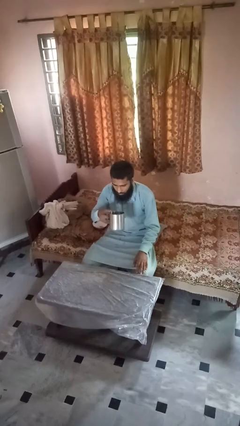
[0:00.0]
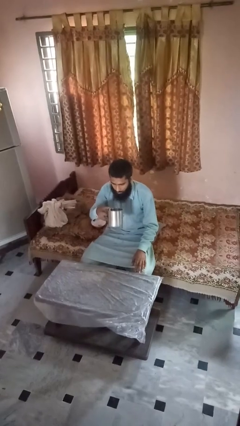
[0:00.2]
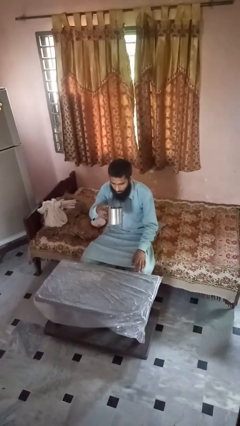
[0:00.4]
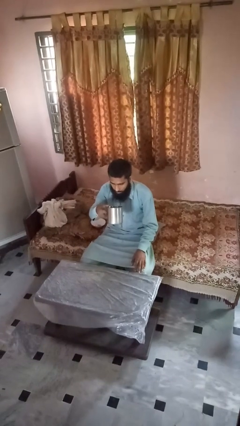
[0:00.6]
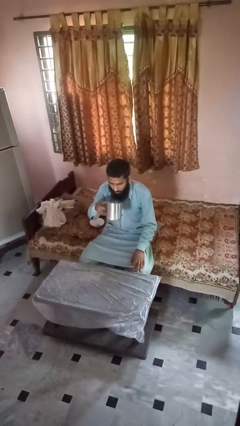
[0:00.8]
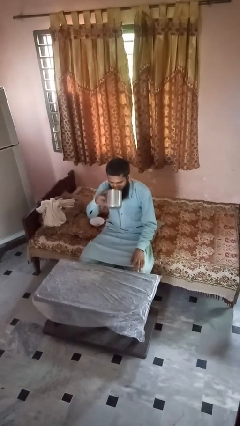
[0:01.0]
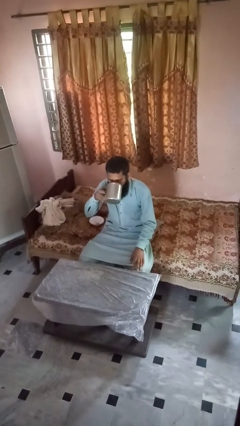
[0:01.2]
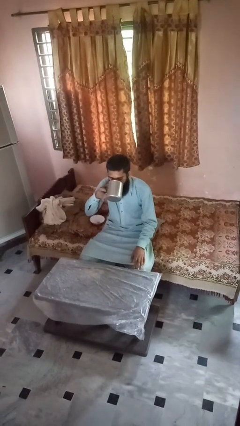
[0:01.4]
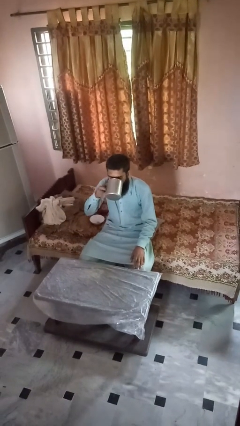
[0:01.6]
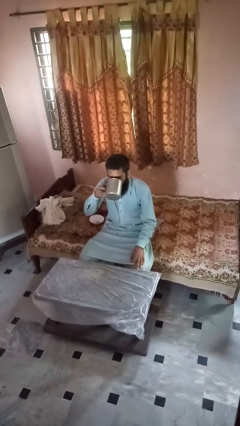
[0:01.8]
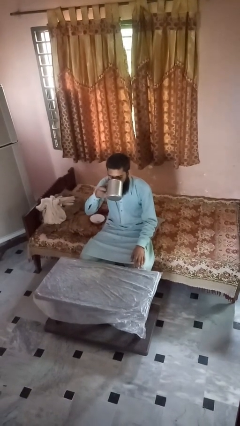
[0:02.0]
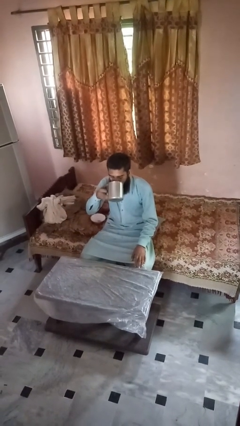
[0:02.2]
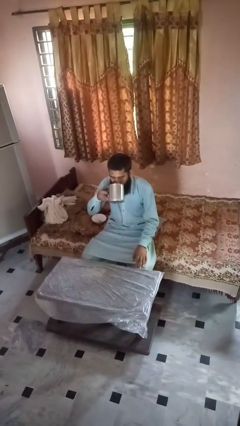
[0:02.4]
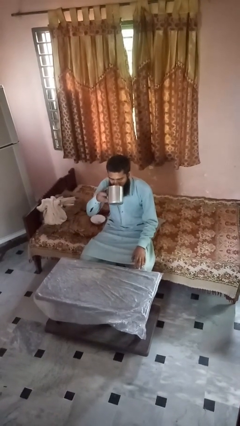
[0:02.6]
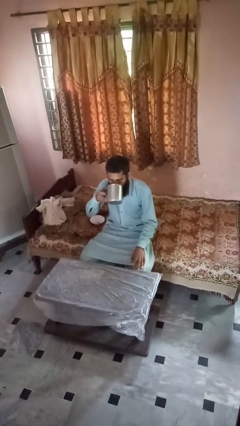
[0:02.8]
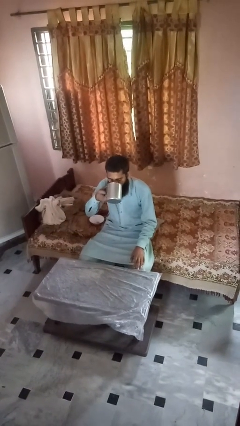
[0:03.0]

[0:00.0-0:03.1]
person drinks from mug

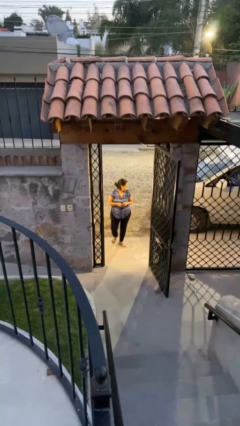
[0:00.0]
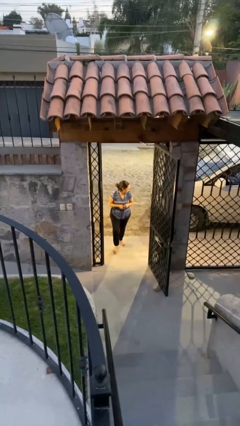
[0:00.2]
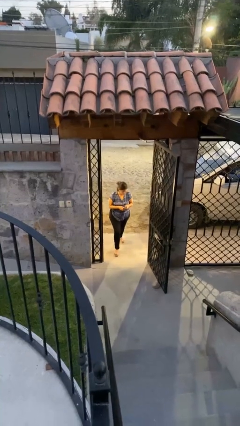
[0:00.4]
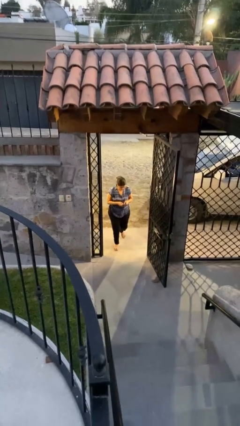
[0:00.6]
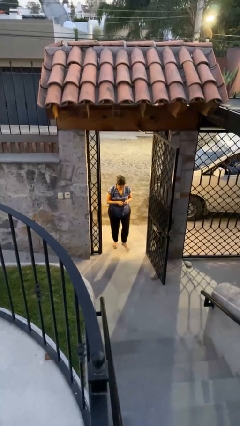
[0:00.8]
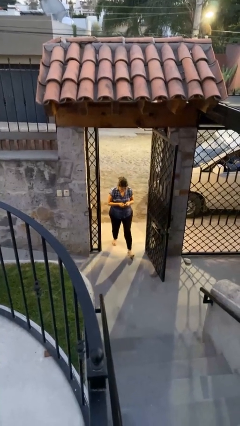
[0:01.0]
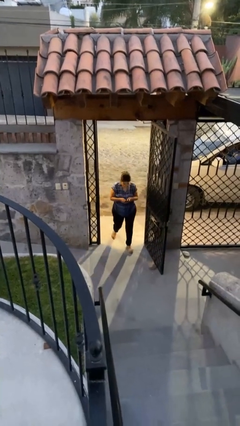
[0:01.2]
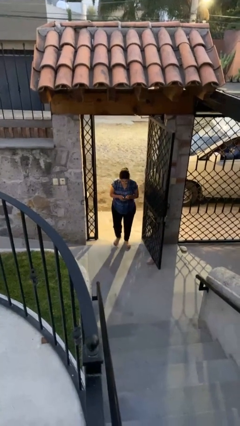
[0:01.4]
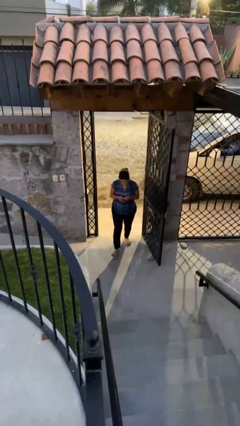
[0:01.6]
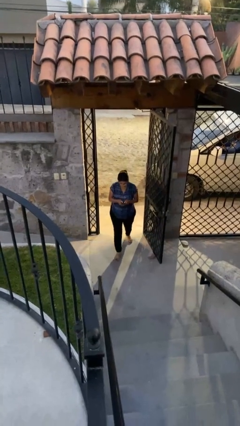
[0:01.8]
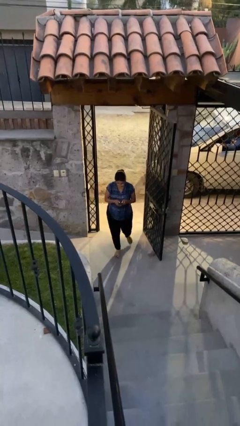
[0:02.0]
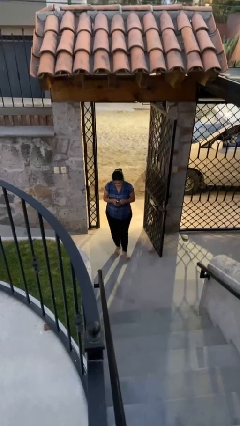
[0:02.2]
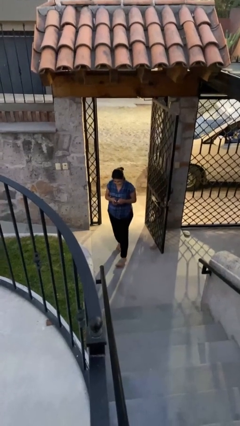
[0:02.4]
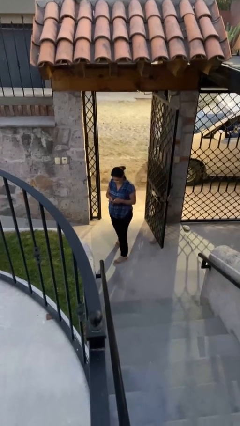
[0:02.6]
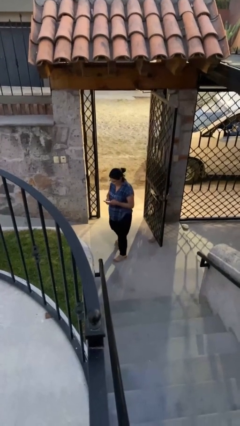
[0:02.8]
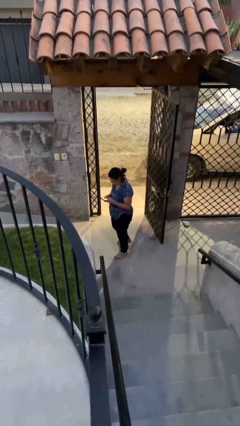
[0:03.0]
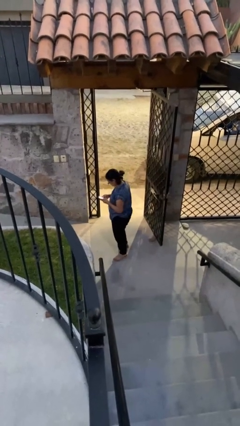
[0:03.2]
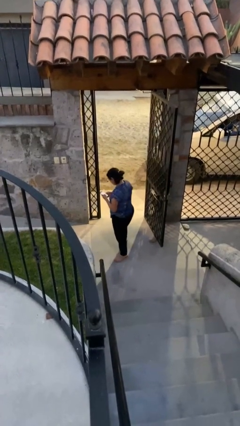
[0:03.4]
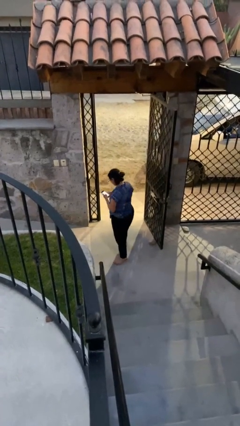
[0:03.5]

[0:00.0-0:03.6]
person enters scene through structure

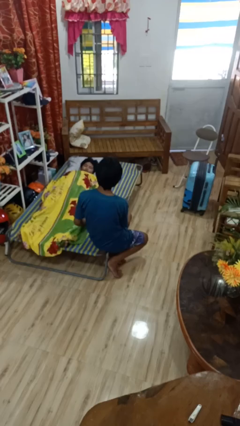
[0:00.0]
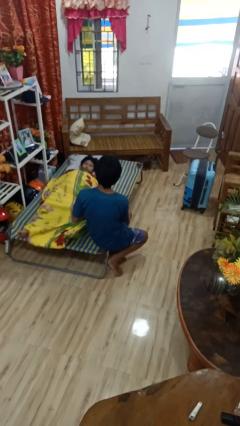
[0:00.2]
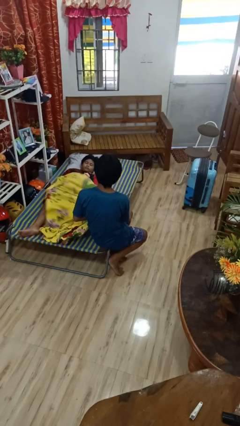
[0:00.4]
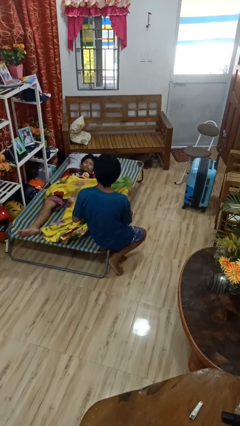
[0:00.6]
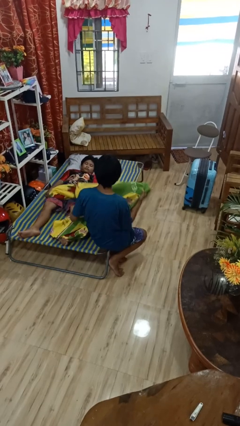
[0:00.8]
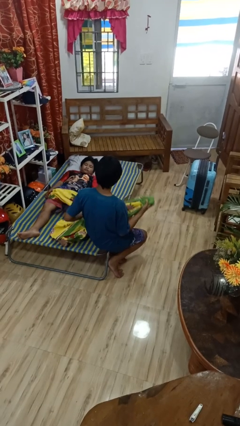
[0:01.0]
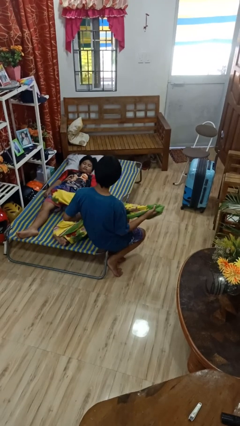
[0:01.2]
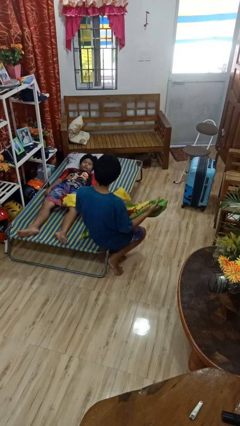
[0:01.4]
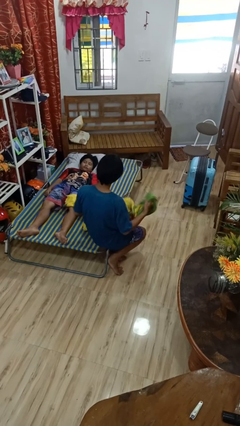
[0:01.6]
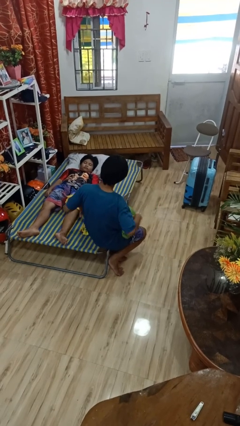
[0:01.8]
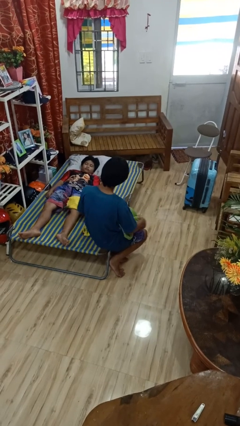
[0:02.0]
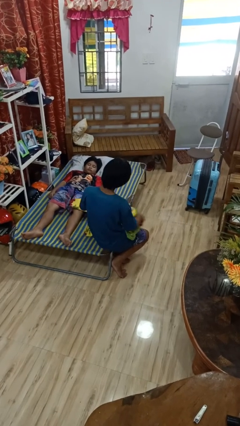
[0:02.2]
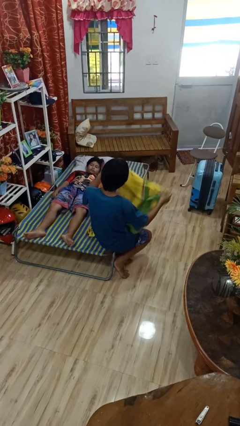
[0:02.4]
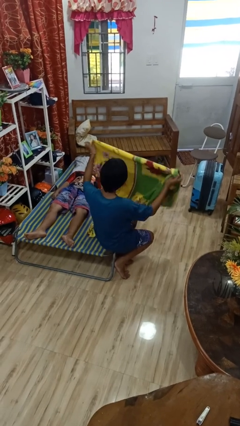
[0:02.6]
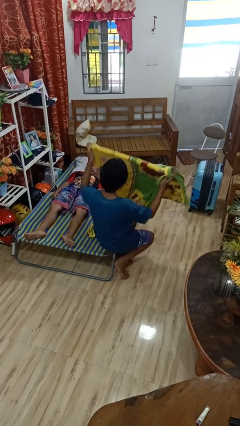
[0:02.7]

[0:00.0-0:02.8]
person uncovers friend with blanket

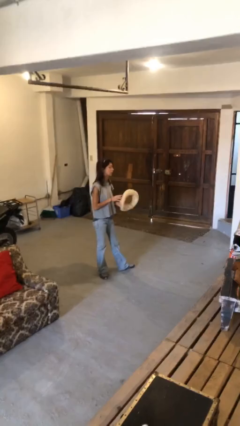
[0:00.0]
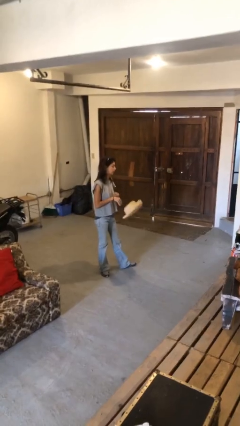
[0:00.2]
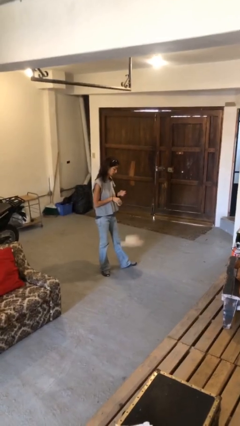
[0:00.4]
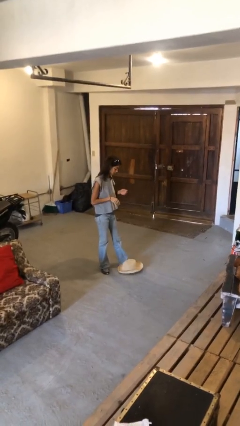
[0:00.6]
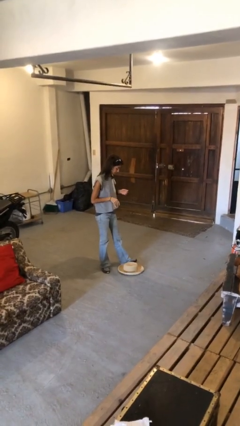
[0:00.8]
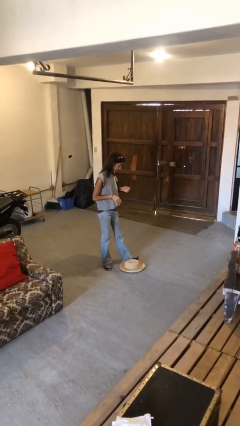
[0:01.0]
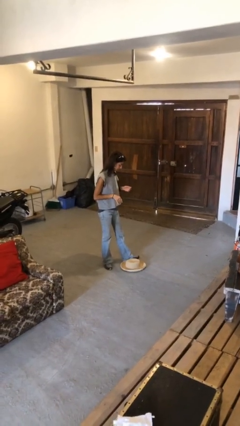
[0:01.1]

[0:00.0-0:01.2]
person drops object

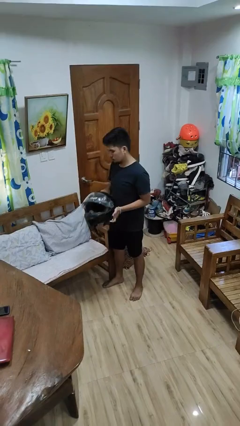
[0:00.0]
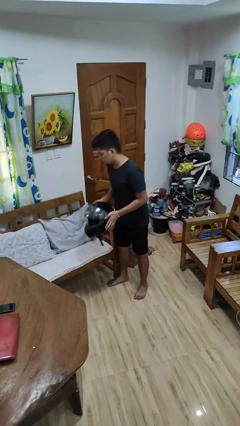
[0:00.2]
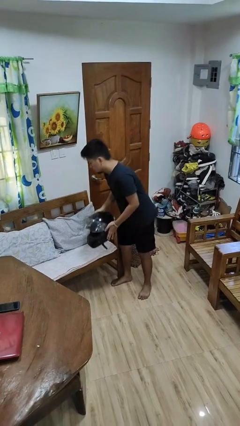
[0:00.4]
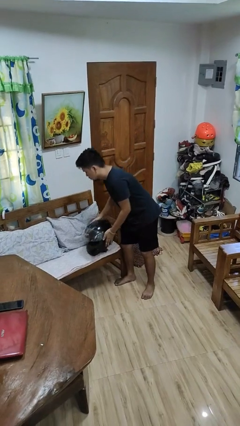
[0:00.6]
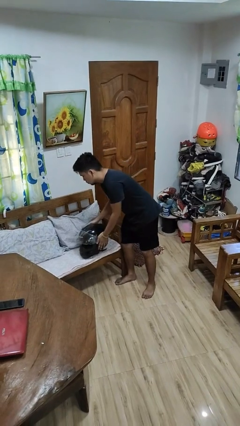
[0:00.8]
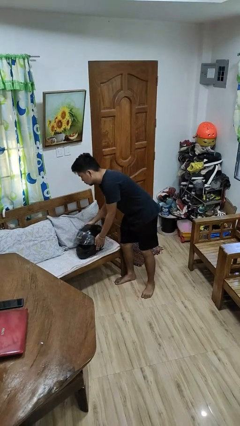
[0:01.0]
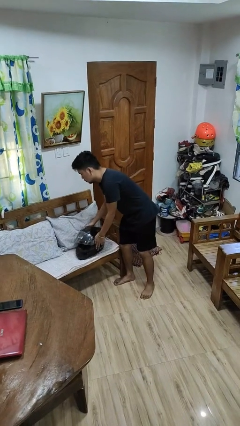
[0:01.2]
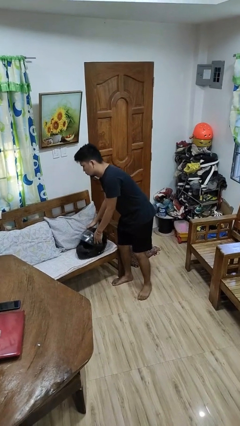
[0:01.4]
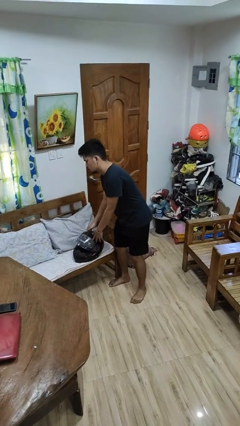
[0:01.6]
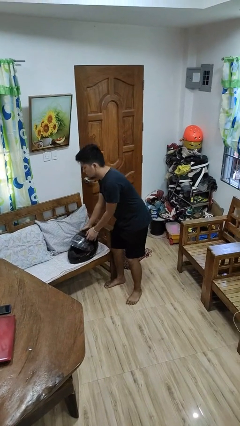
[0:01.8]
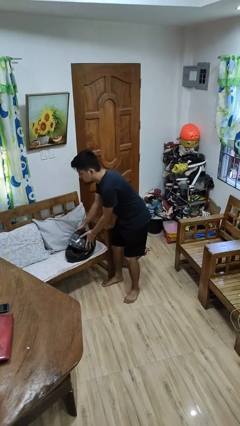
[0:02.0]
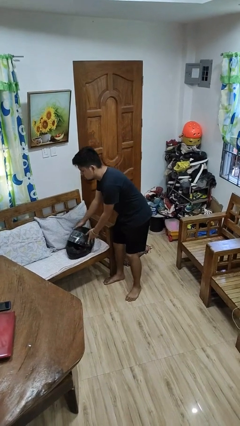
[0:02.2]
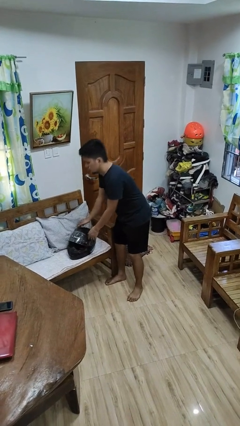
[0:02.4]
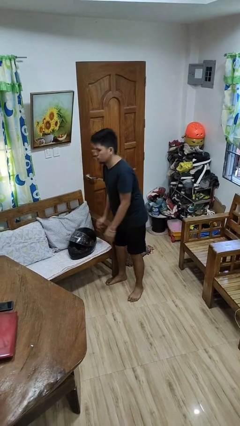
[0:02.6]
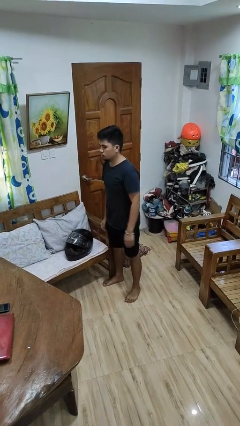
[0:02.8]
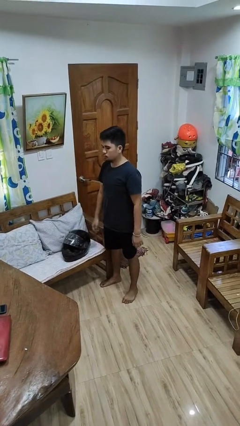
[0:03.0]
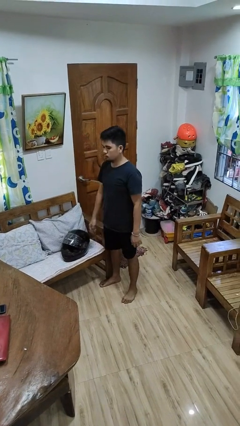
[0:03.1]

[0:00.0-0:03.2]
person puts down object on couch

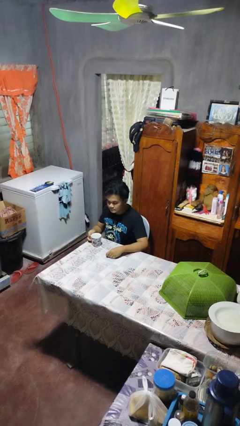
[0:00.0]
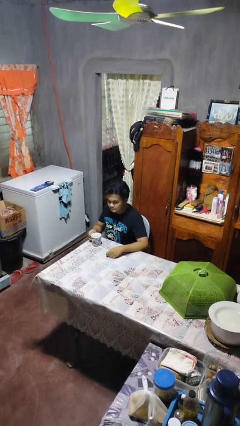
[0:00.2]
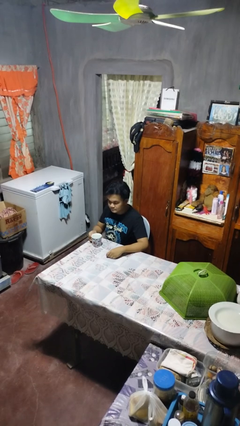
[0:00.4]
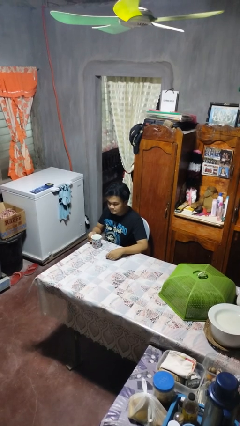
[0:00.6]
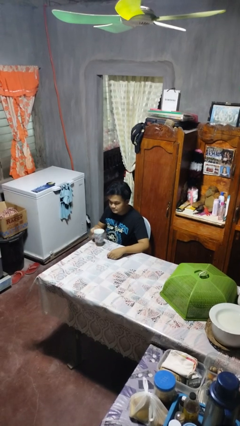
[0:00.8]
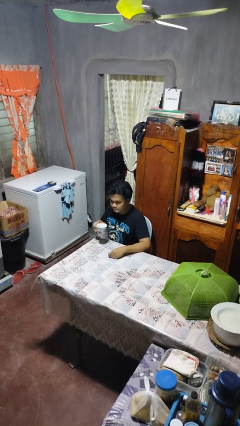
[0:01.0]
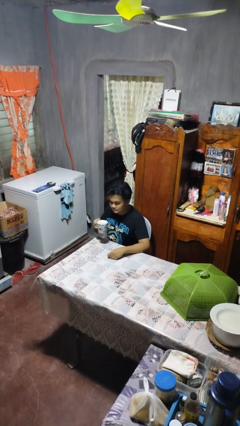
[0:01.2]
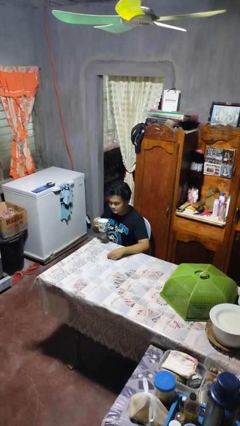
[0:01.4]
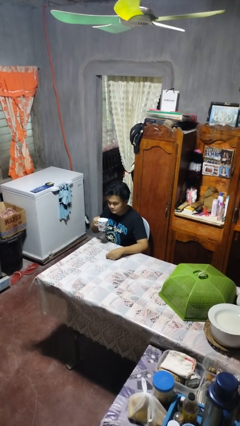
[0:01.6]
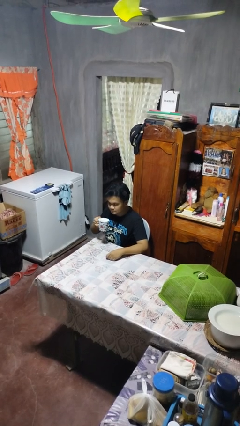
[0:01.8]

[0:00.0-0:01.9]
person picks up object from table

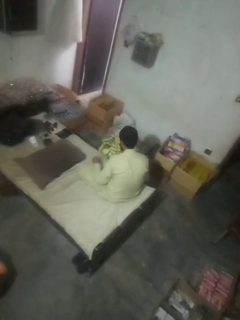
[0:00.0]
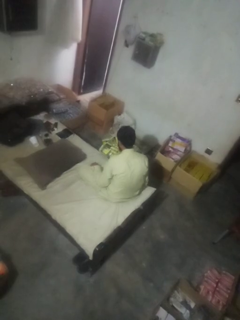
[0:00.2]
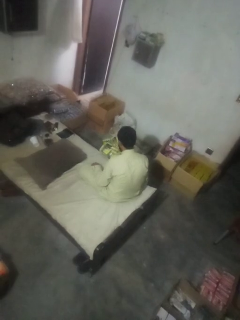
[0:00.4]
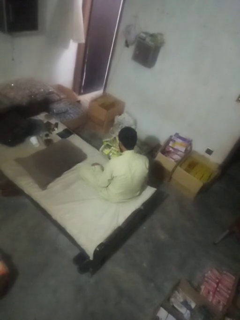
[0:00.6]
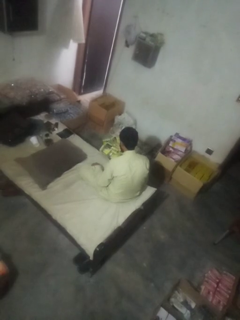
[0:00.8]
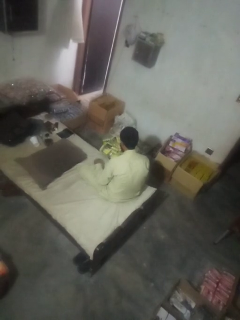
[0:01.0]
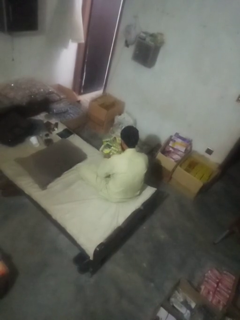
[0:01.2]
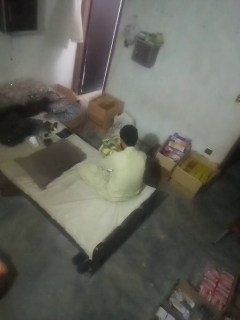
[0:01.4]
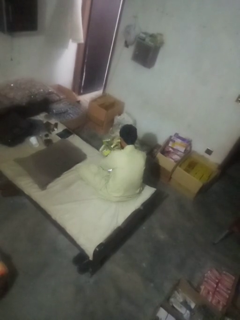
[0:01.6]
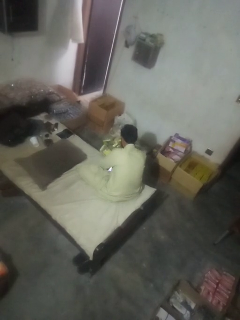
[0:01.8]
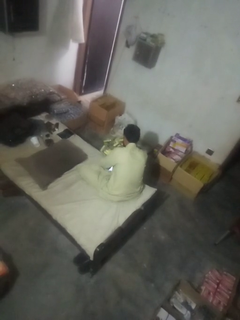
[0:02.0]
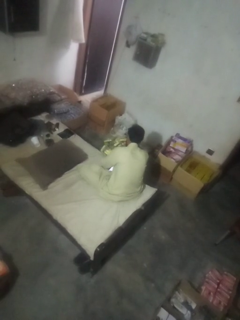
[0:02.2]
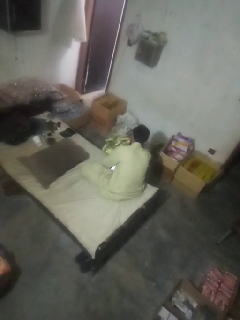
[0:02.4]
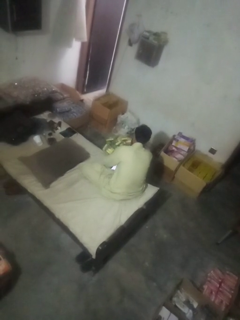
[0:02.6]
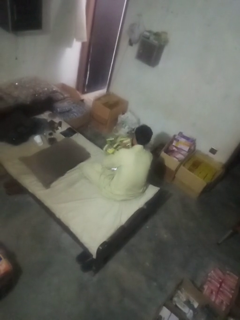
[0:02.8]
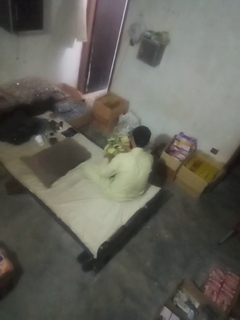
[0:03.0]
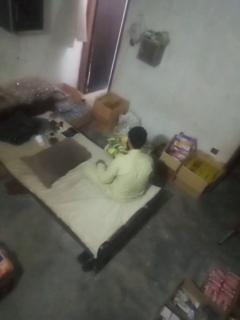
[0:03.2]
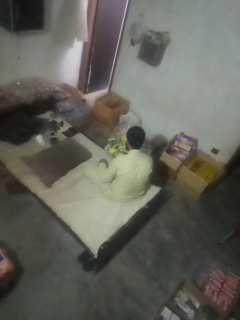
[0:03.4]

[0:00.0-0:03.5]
person searches in box
